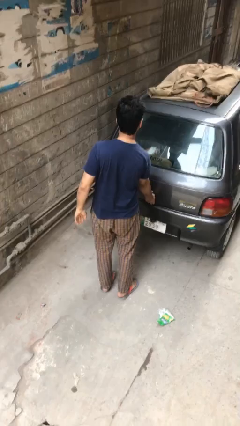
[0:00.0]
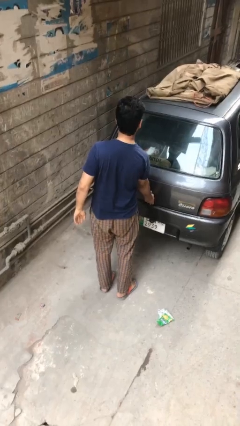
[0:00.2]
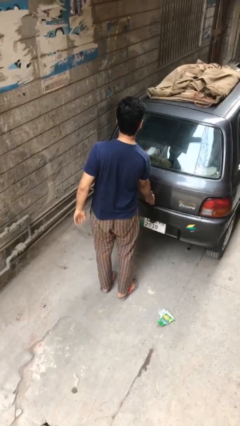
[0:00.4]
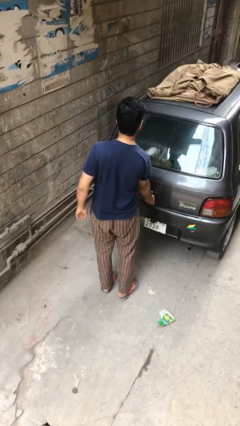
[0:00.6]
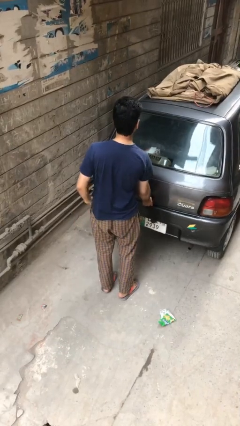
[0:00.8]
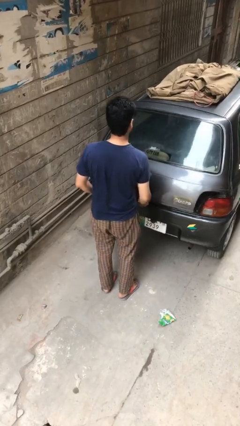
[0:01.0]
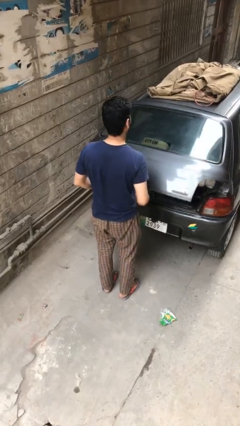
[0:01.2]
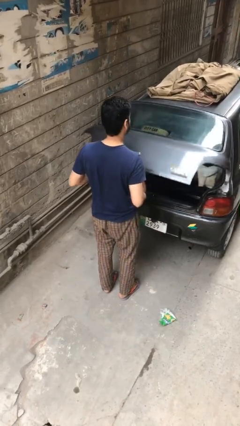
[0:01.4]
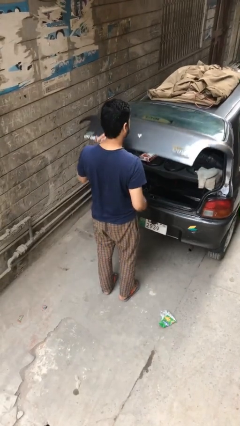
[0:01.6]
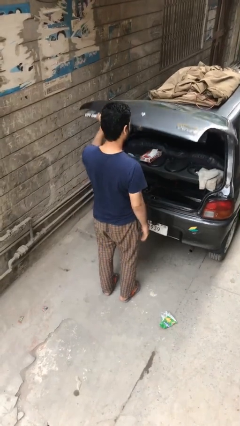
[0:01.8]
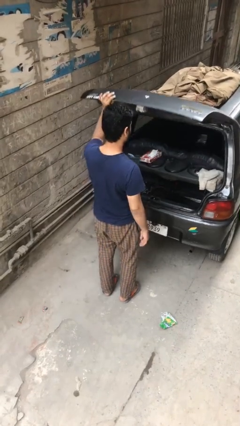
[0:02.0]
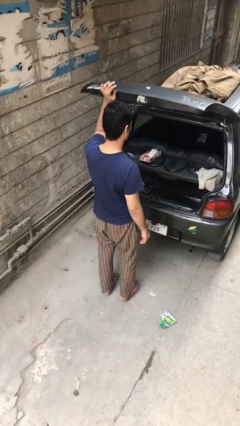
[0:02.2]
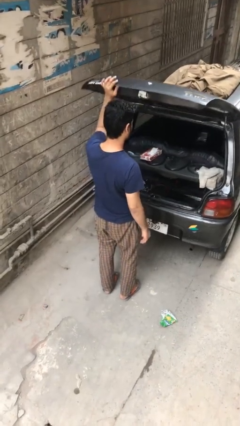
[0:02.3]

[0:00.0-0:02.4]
person opens car trunk

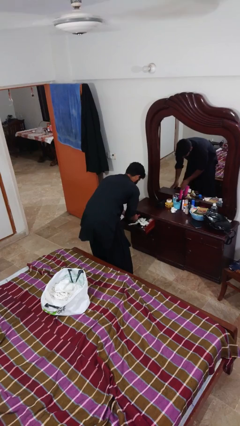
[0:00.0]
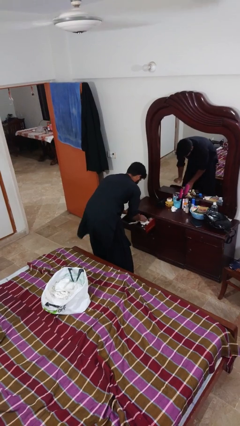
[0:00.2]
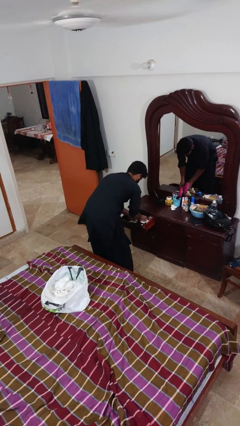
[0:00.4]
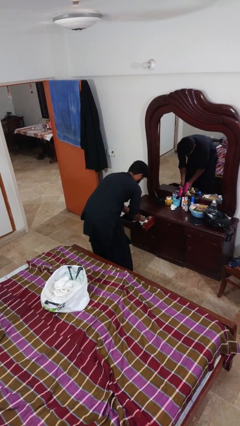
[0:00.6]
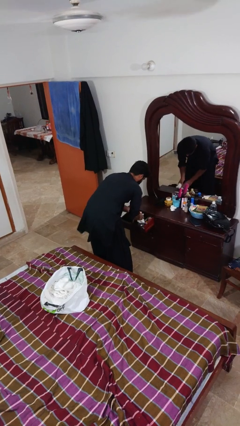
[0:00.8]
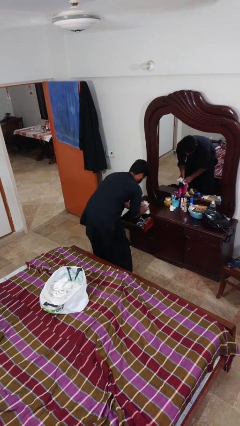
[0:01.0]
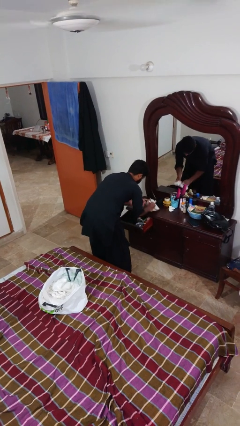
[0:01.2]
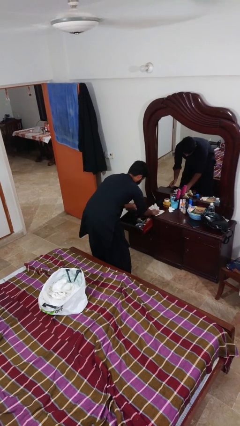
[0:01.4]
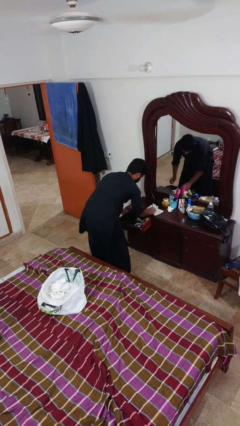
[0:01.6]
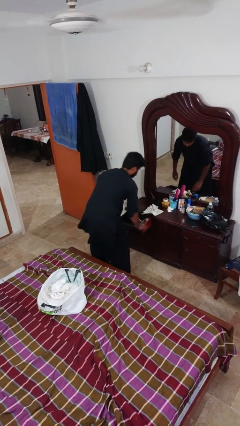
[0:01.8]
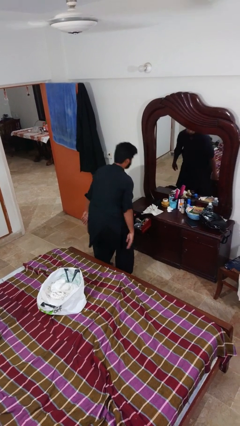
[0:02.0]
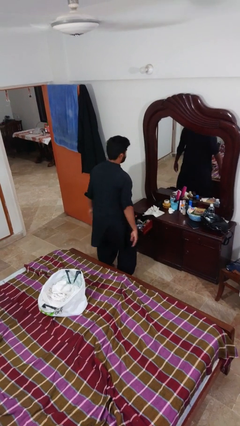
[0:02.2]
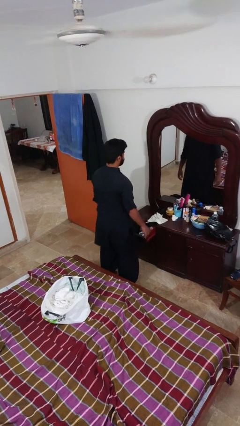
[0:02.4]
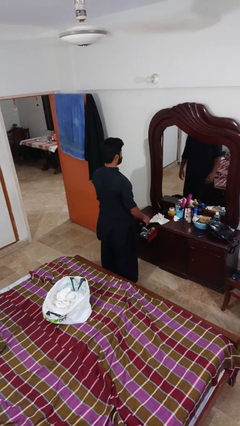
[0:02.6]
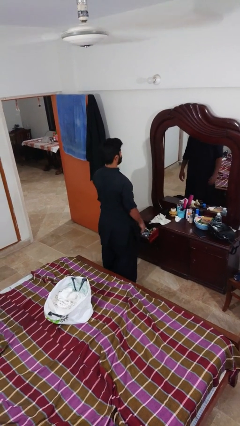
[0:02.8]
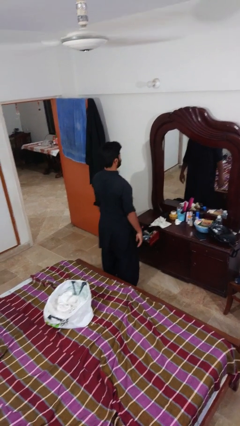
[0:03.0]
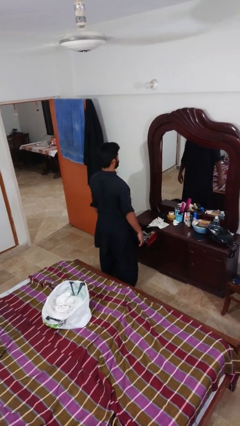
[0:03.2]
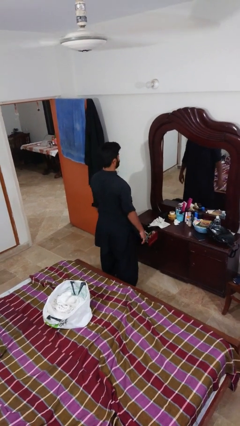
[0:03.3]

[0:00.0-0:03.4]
person takes clothes from dresser

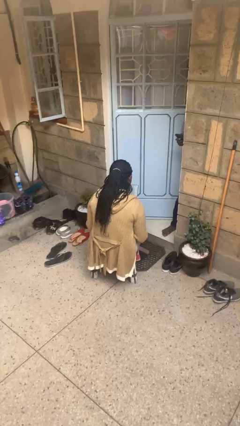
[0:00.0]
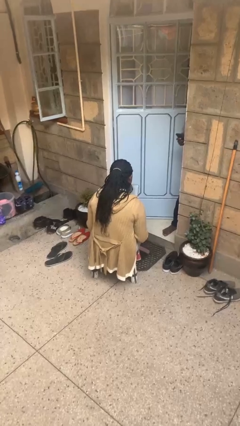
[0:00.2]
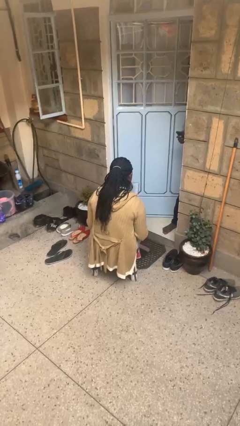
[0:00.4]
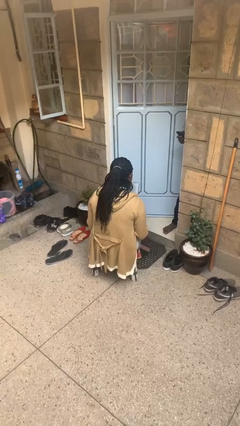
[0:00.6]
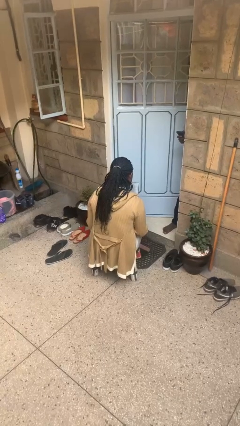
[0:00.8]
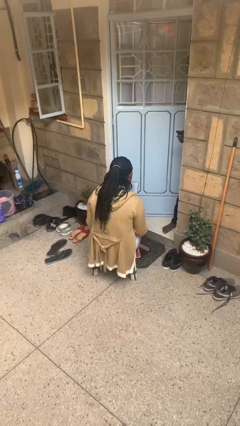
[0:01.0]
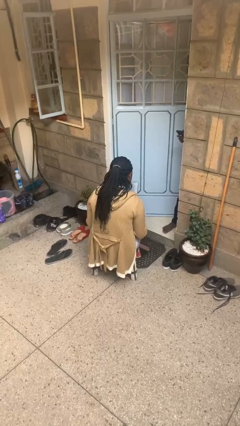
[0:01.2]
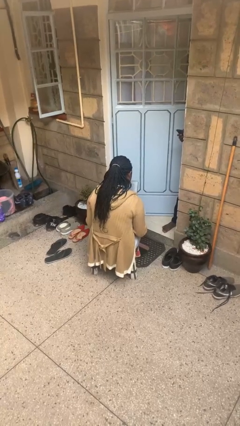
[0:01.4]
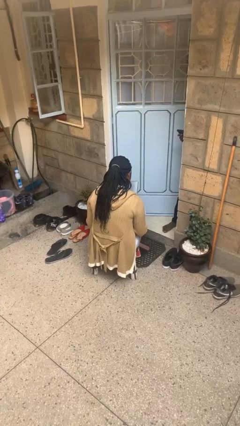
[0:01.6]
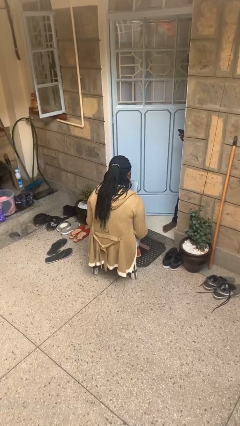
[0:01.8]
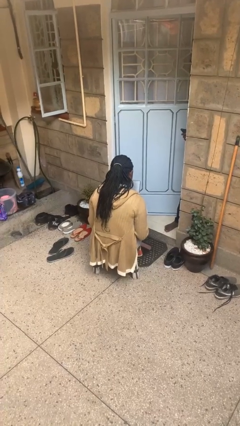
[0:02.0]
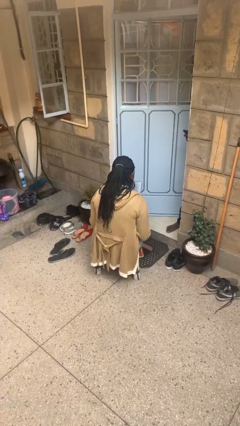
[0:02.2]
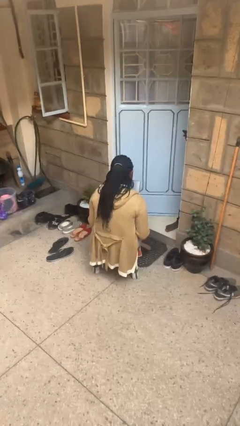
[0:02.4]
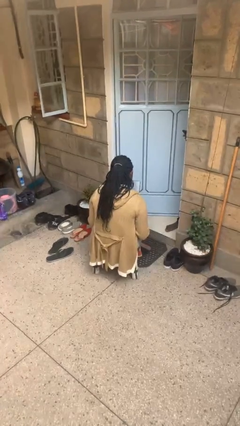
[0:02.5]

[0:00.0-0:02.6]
person interacts with tablet

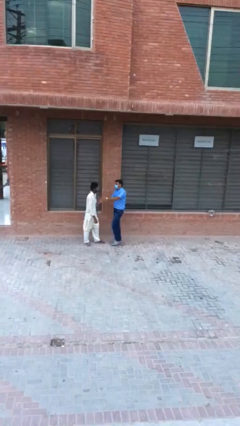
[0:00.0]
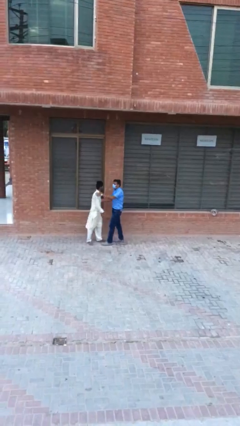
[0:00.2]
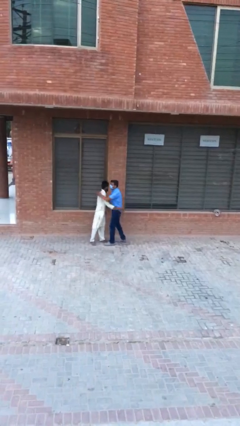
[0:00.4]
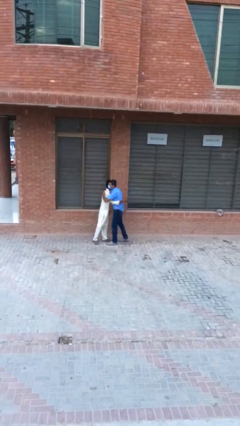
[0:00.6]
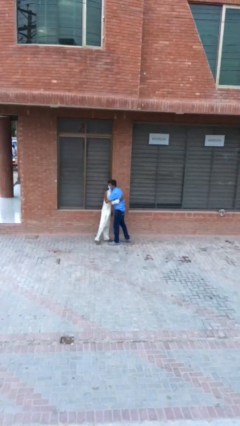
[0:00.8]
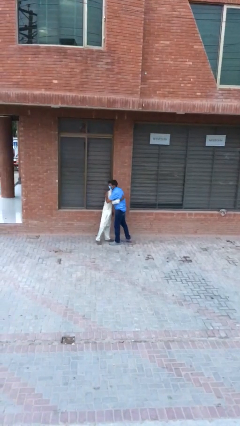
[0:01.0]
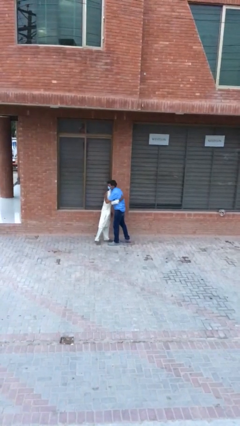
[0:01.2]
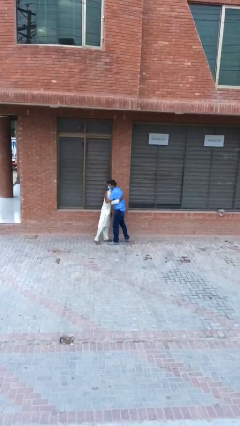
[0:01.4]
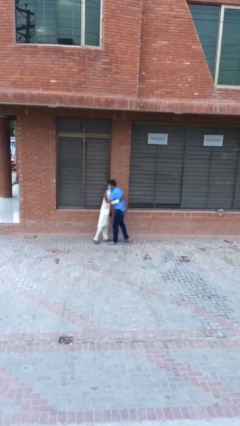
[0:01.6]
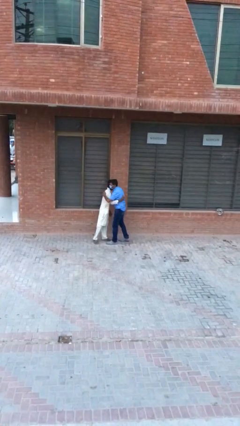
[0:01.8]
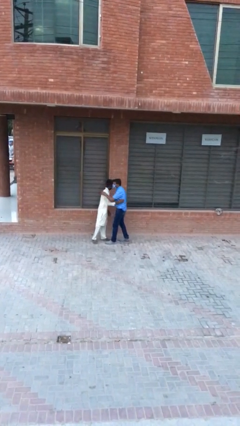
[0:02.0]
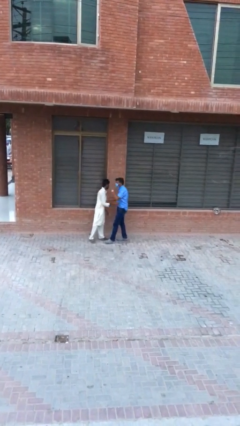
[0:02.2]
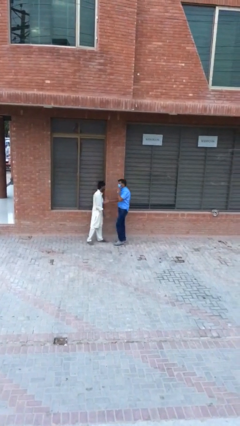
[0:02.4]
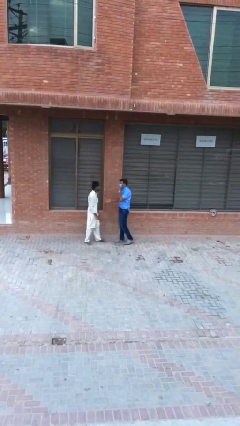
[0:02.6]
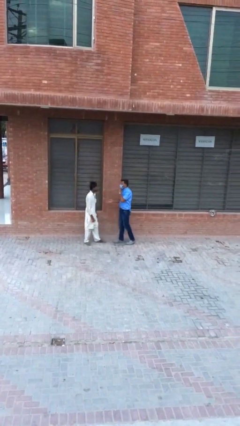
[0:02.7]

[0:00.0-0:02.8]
person embraces person

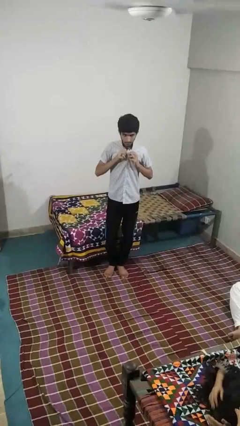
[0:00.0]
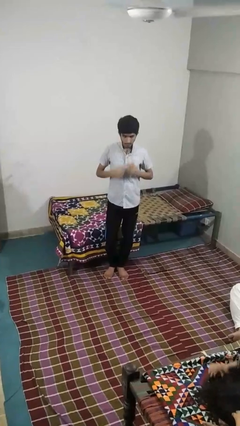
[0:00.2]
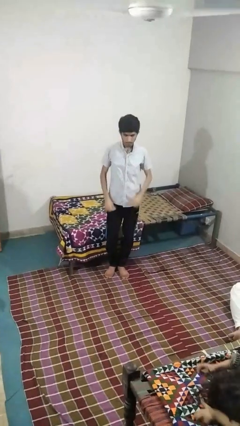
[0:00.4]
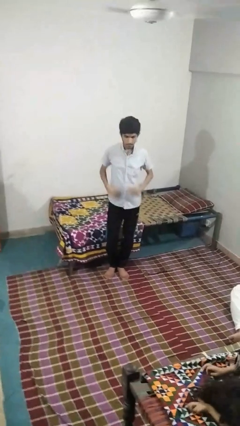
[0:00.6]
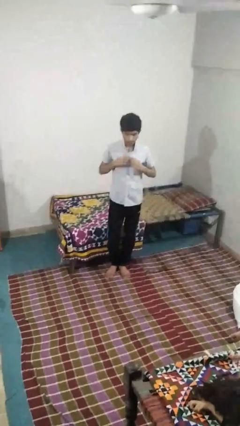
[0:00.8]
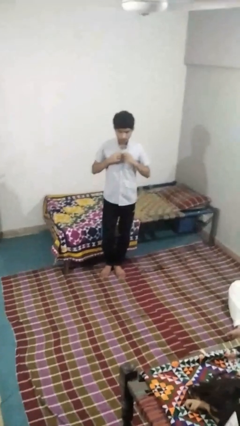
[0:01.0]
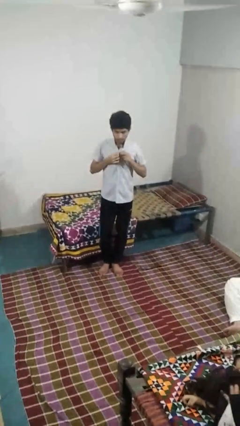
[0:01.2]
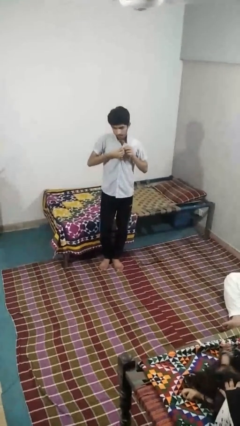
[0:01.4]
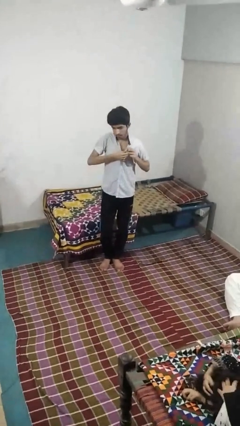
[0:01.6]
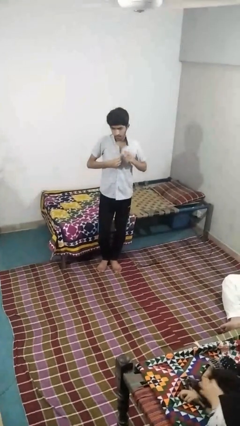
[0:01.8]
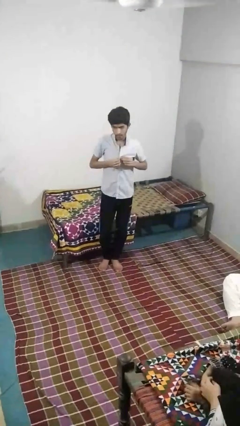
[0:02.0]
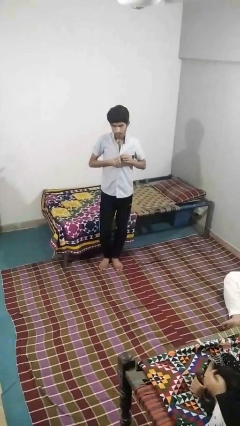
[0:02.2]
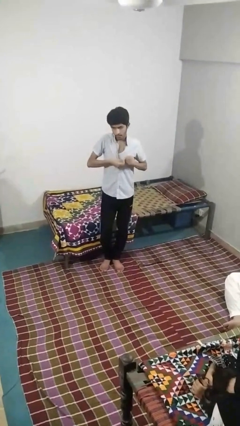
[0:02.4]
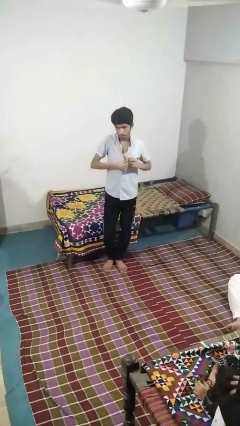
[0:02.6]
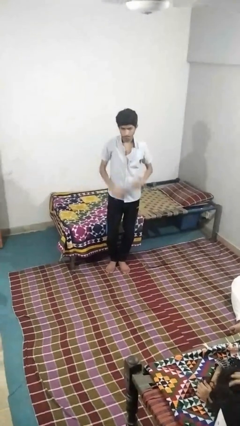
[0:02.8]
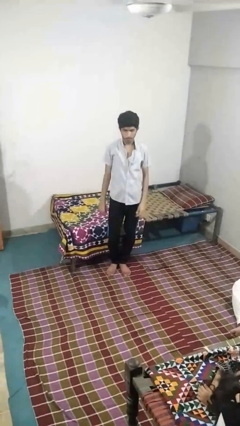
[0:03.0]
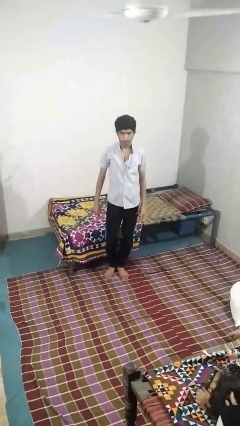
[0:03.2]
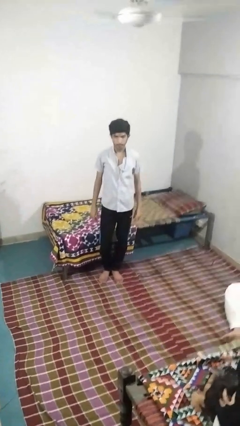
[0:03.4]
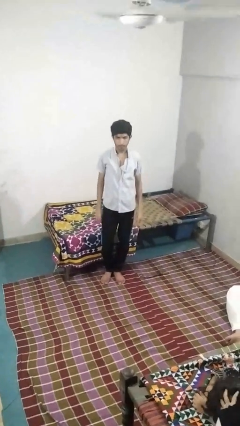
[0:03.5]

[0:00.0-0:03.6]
person unbuttons shirt

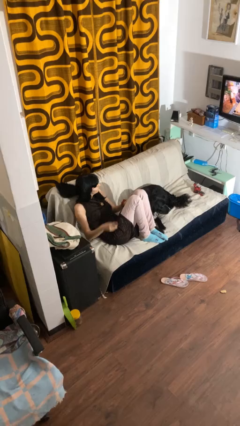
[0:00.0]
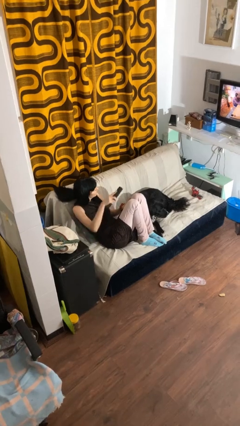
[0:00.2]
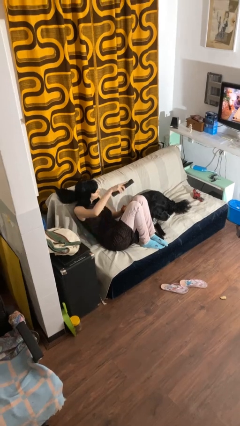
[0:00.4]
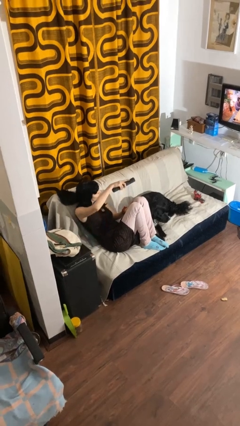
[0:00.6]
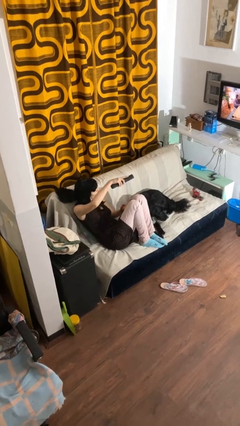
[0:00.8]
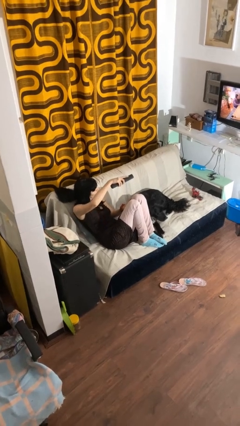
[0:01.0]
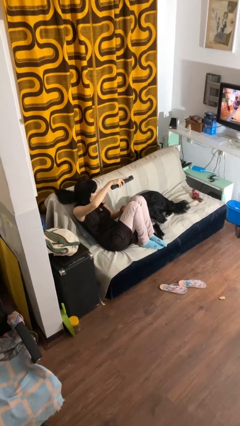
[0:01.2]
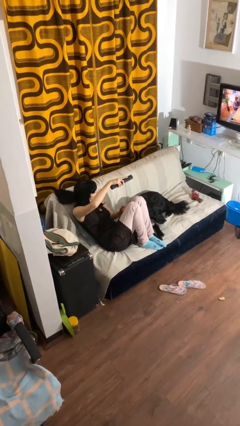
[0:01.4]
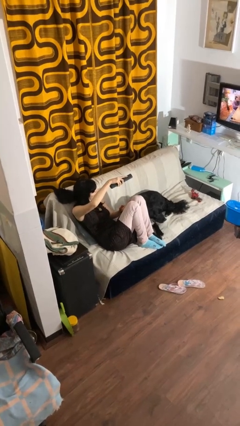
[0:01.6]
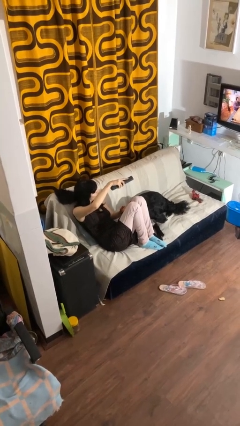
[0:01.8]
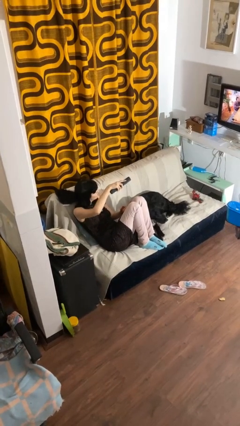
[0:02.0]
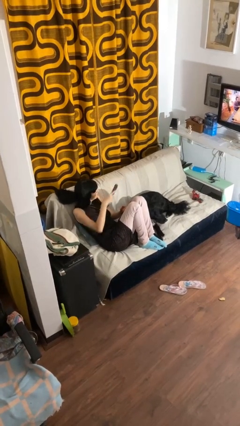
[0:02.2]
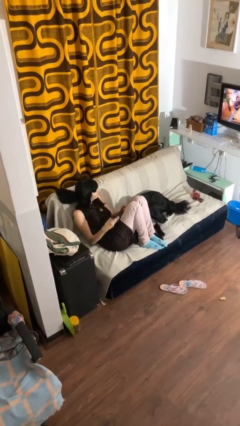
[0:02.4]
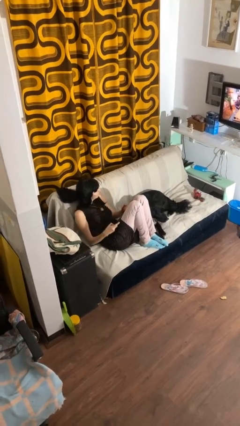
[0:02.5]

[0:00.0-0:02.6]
person uses television remote

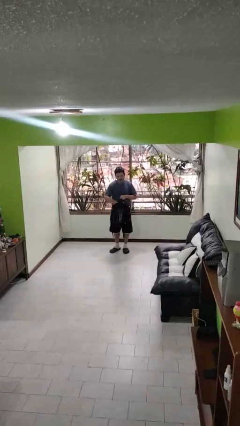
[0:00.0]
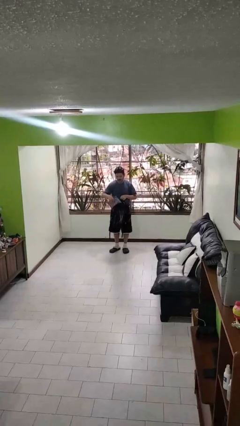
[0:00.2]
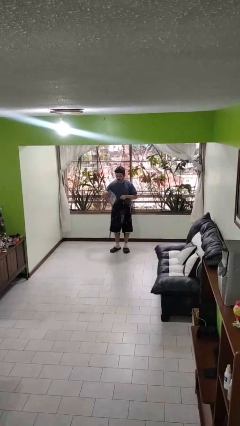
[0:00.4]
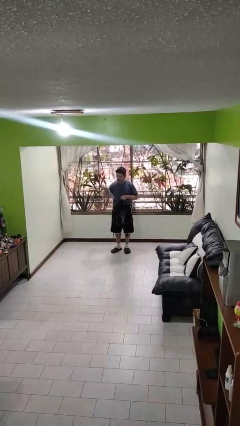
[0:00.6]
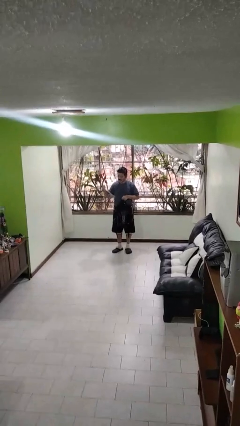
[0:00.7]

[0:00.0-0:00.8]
person takes object from backpack
